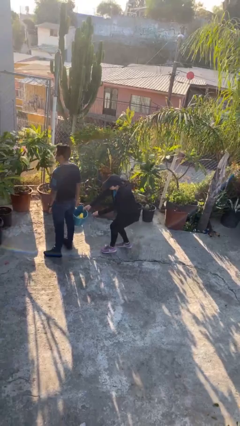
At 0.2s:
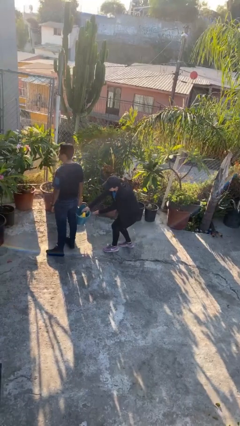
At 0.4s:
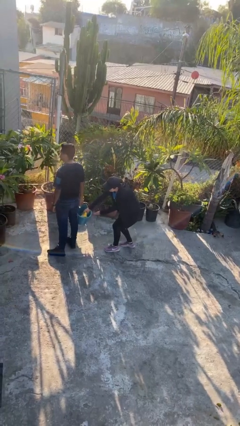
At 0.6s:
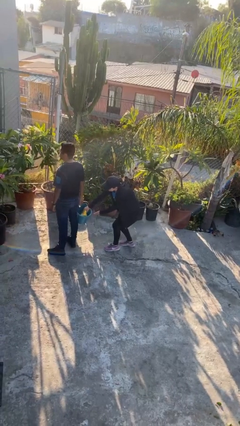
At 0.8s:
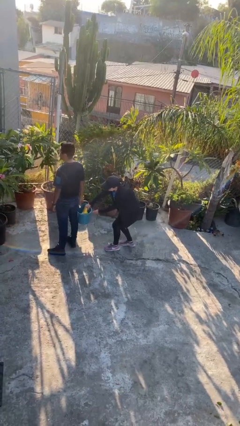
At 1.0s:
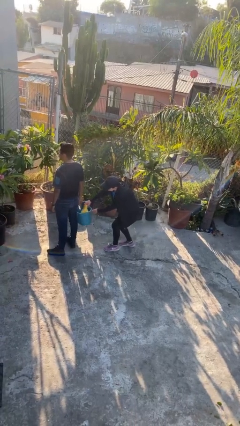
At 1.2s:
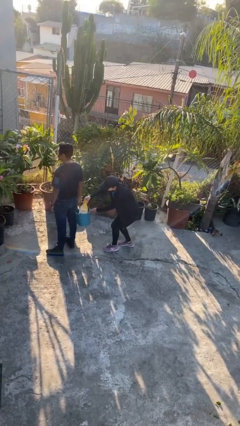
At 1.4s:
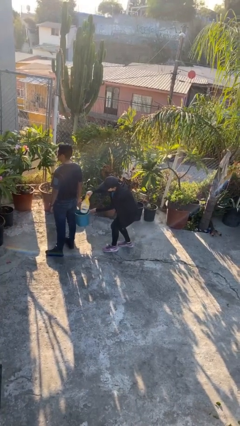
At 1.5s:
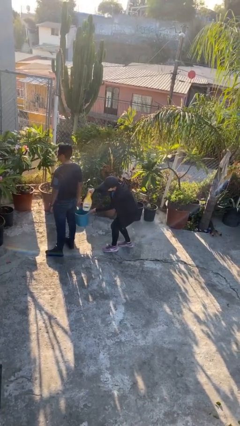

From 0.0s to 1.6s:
person steals object from person

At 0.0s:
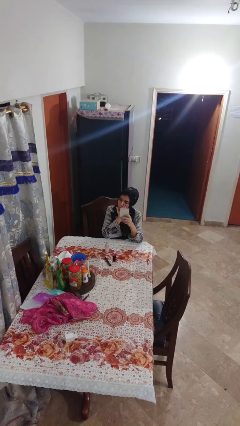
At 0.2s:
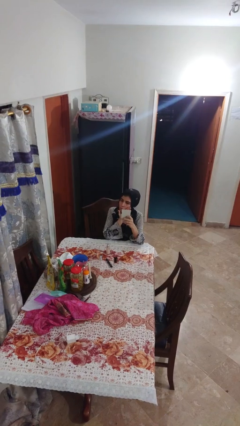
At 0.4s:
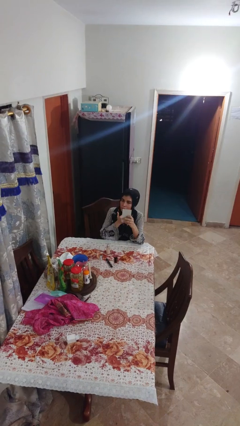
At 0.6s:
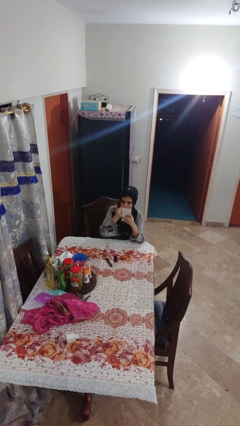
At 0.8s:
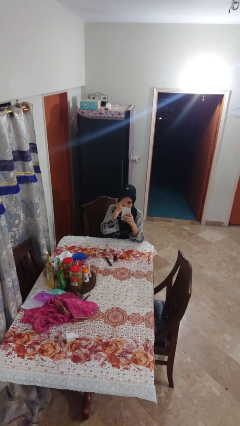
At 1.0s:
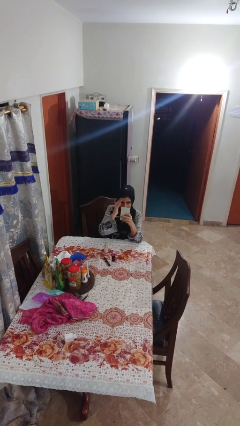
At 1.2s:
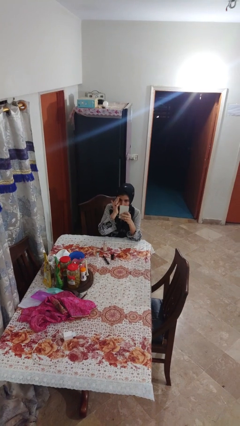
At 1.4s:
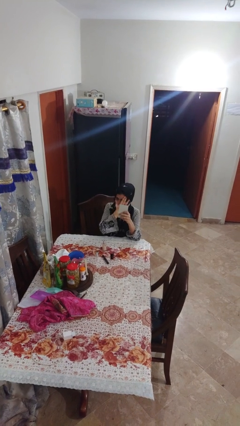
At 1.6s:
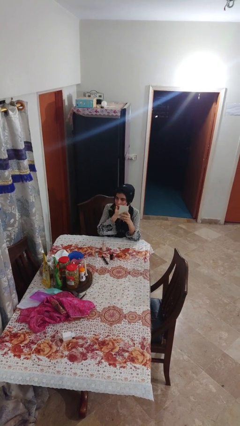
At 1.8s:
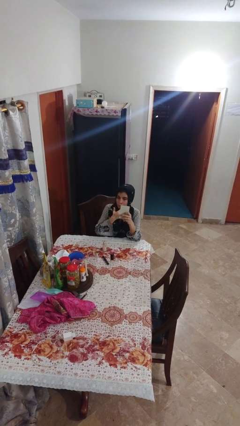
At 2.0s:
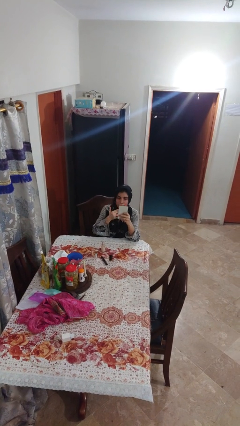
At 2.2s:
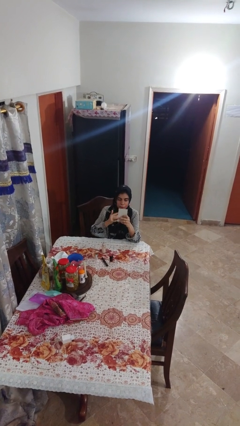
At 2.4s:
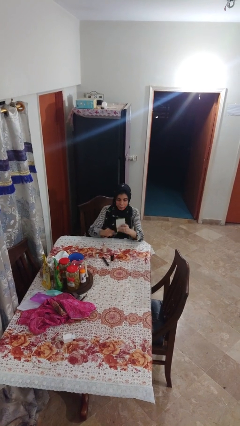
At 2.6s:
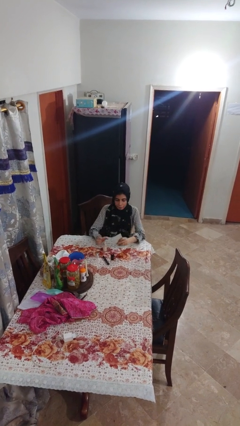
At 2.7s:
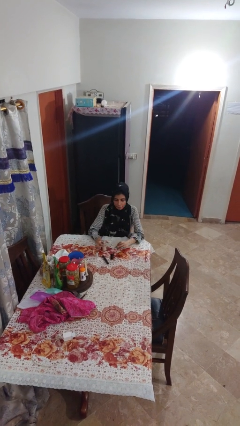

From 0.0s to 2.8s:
person applies foundation makeup

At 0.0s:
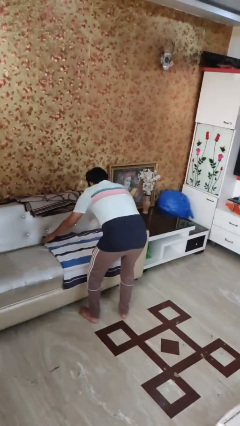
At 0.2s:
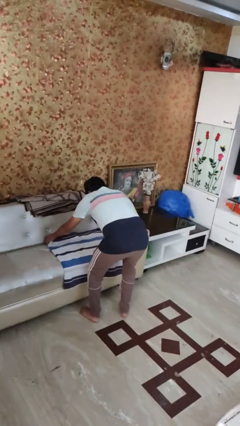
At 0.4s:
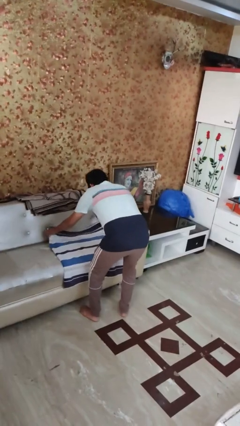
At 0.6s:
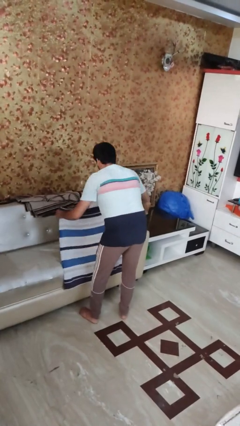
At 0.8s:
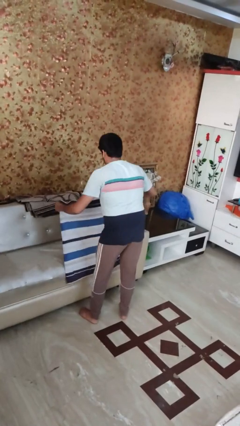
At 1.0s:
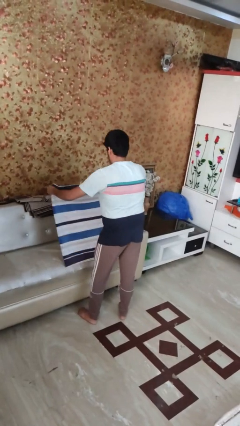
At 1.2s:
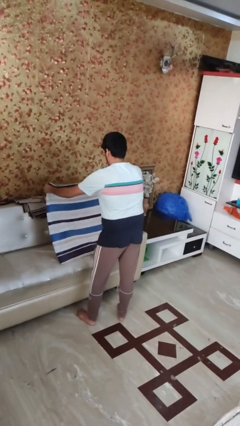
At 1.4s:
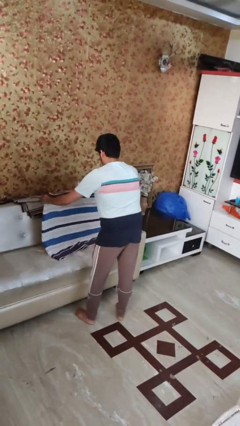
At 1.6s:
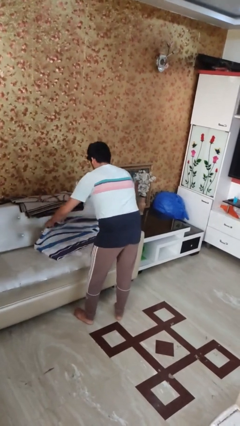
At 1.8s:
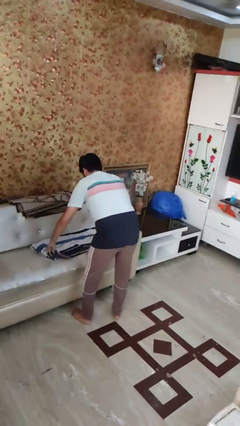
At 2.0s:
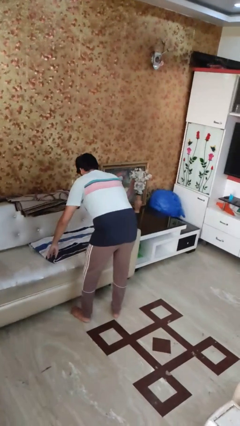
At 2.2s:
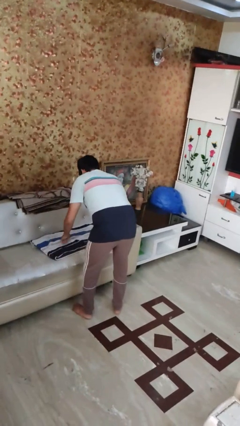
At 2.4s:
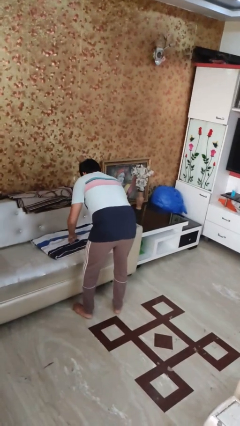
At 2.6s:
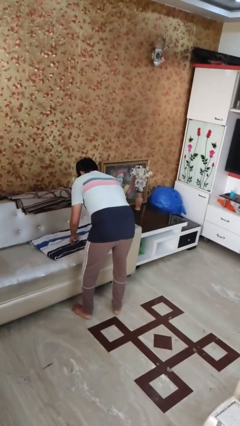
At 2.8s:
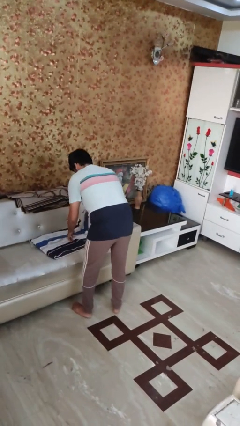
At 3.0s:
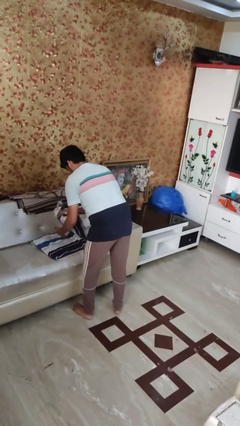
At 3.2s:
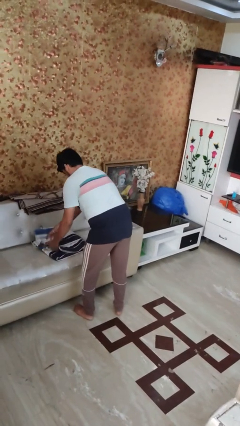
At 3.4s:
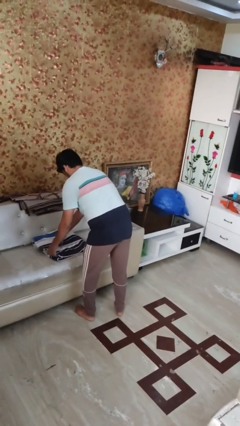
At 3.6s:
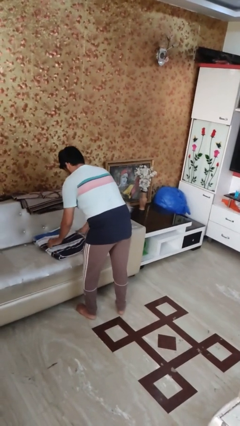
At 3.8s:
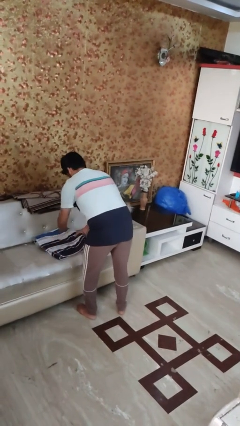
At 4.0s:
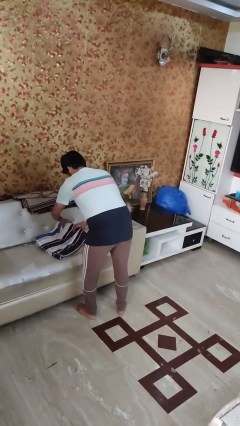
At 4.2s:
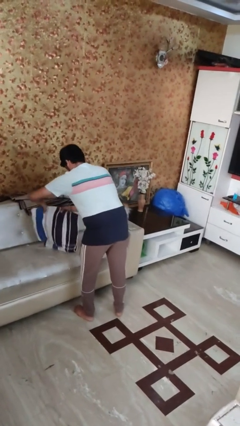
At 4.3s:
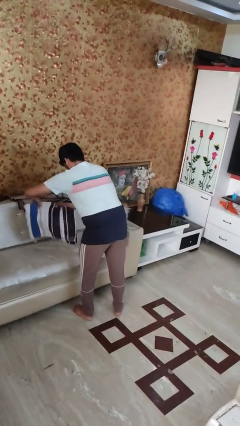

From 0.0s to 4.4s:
person folds towel

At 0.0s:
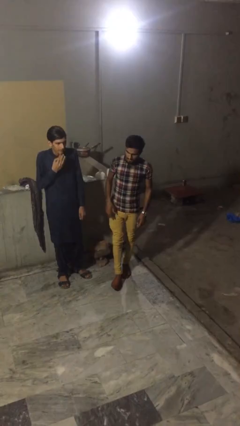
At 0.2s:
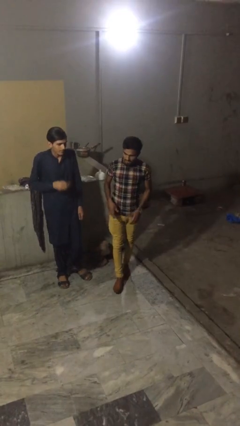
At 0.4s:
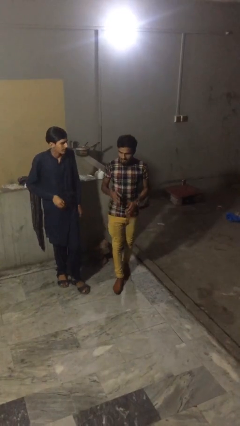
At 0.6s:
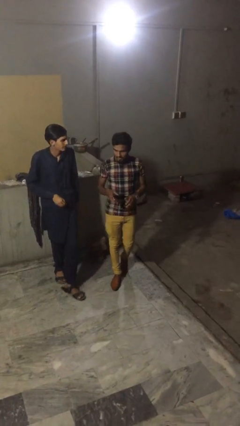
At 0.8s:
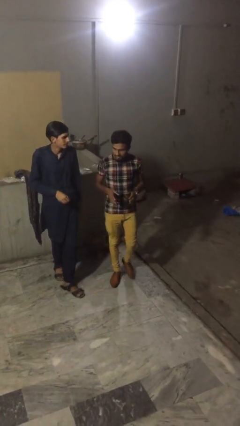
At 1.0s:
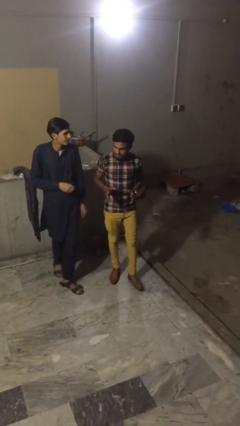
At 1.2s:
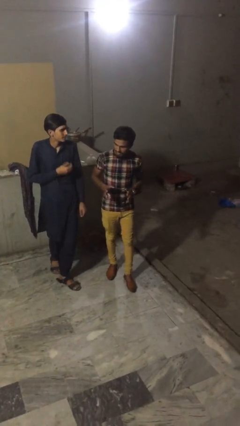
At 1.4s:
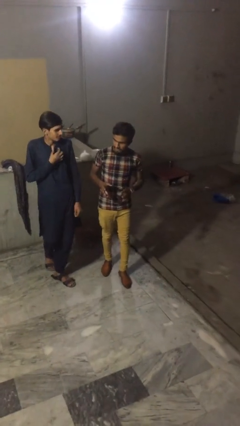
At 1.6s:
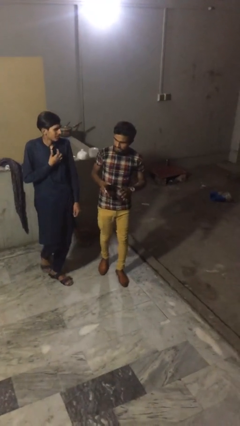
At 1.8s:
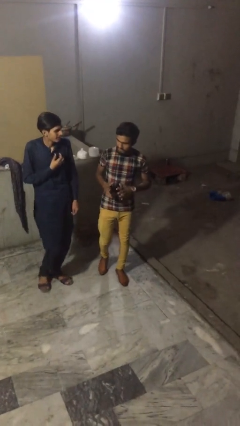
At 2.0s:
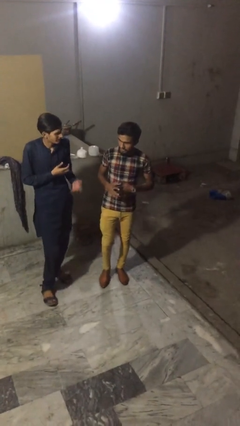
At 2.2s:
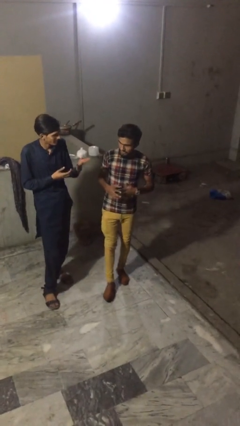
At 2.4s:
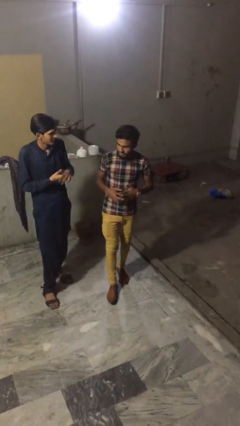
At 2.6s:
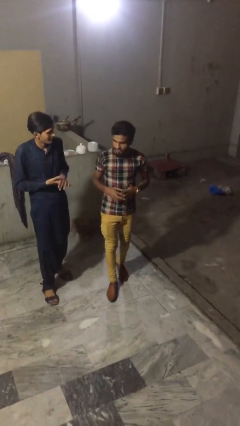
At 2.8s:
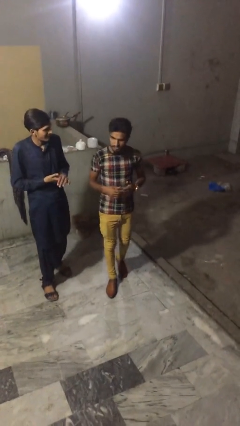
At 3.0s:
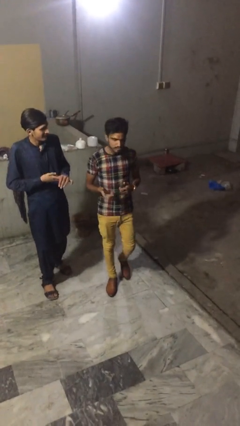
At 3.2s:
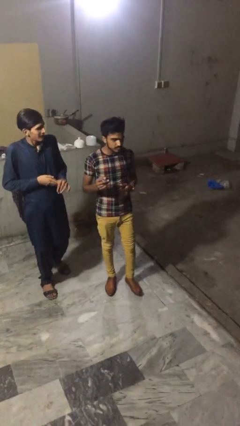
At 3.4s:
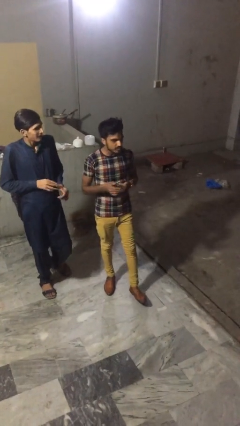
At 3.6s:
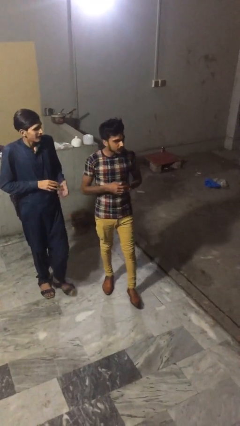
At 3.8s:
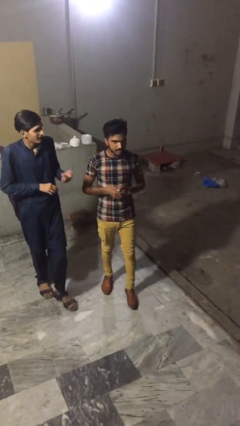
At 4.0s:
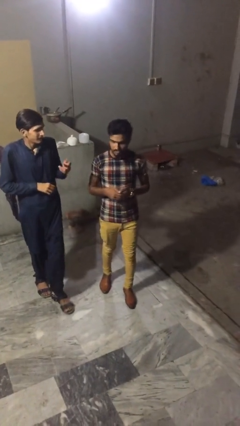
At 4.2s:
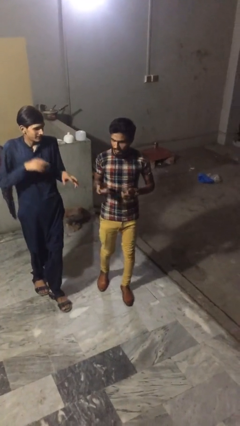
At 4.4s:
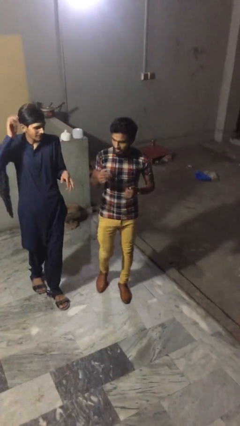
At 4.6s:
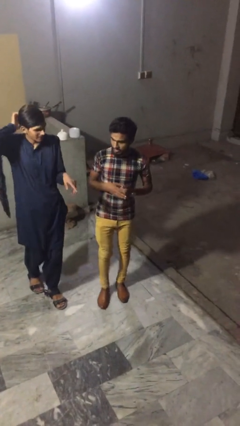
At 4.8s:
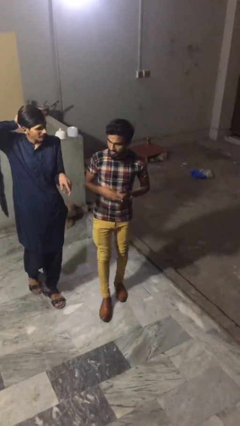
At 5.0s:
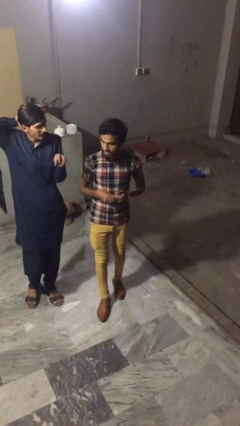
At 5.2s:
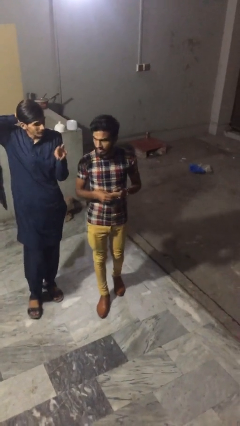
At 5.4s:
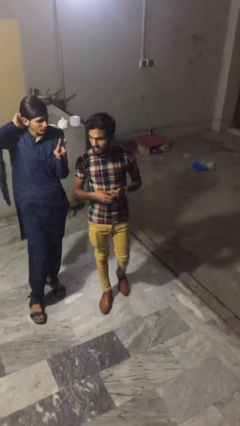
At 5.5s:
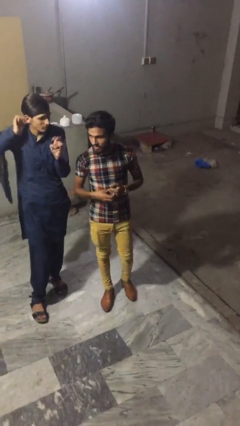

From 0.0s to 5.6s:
person talks to person

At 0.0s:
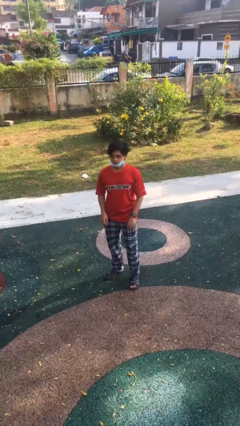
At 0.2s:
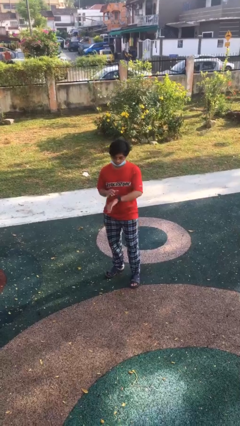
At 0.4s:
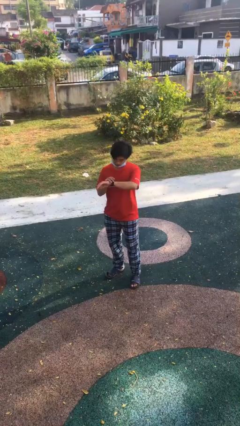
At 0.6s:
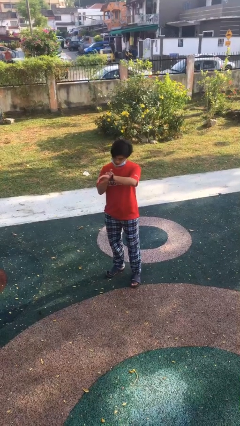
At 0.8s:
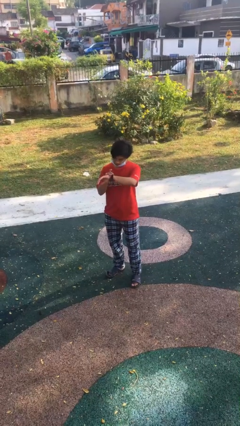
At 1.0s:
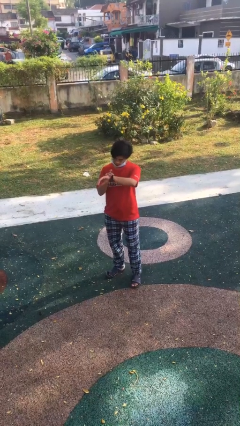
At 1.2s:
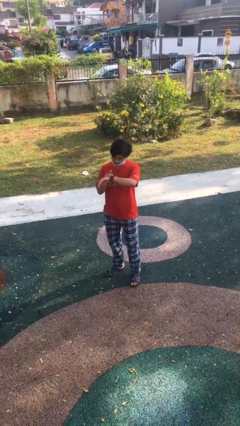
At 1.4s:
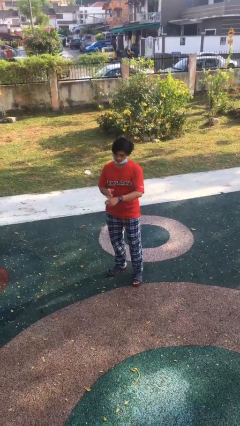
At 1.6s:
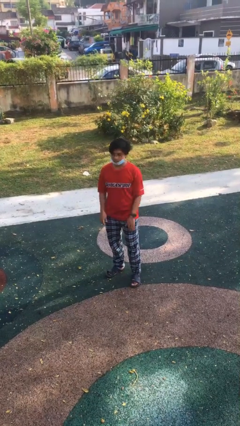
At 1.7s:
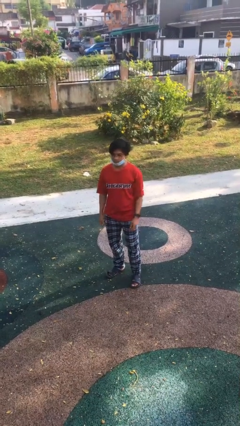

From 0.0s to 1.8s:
person looks at wristwatch

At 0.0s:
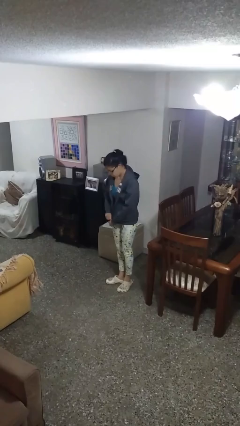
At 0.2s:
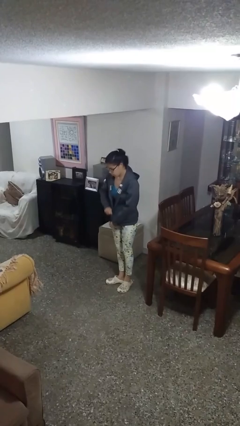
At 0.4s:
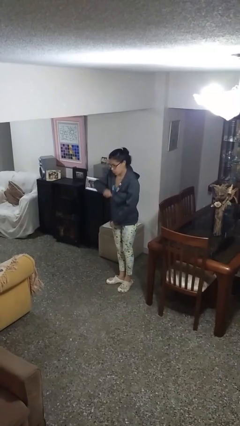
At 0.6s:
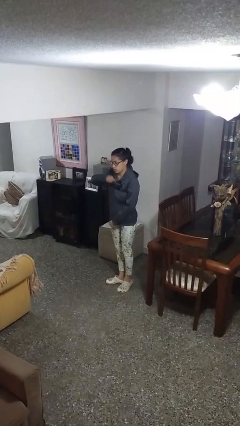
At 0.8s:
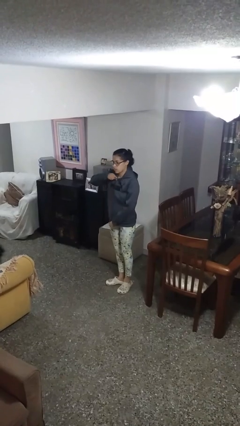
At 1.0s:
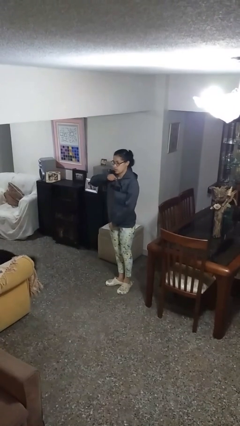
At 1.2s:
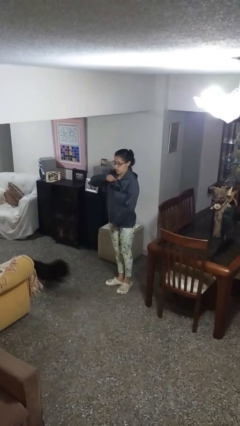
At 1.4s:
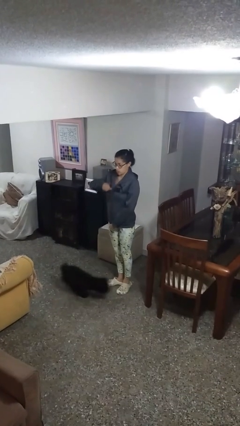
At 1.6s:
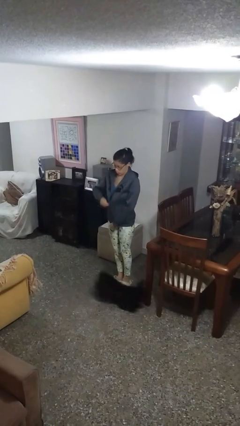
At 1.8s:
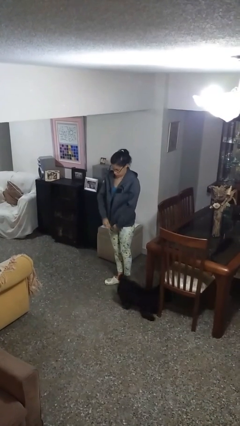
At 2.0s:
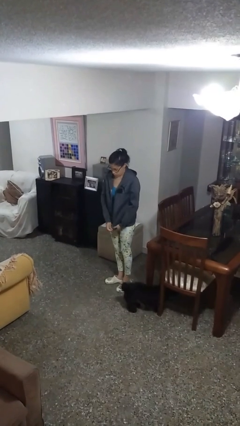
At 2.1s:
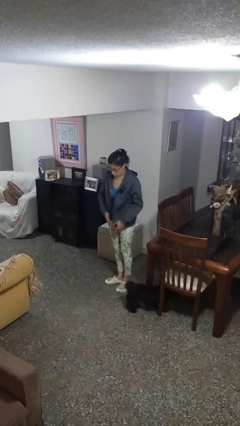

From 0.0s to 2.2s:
person zips up jacket
